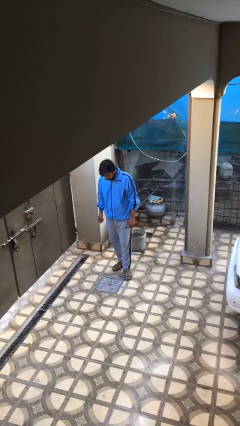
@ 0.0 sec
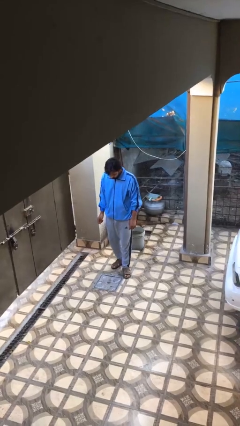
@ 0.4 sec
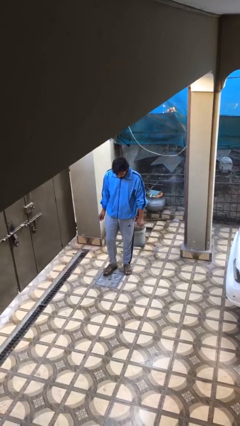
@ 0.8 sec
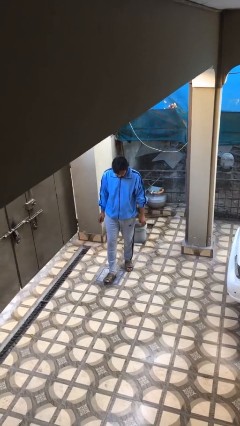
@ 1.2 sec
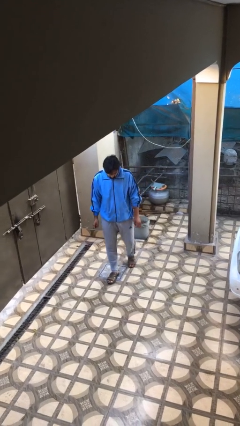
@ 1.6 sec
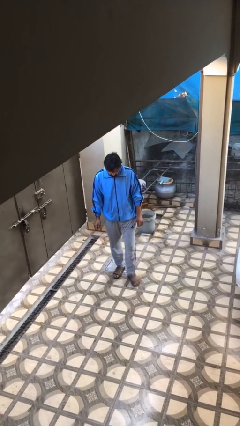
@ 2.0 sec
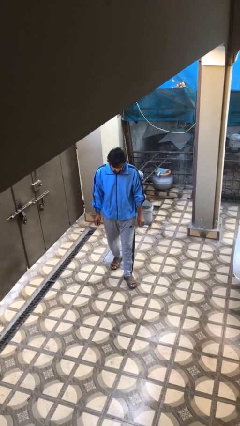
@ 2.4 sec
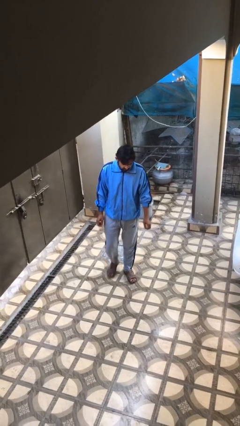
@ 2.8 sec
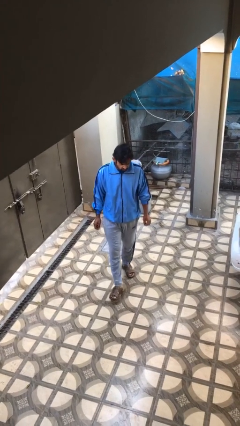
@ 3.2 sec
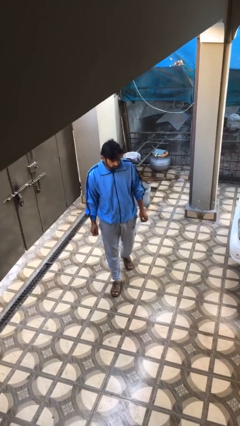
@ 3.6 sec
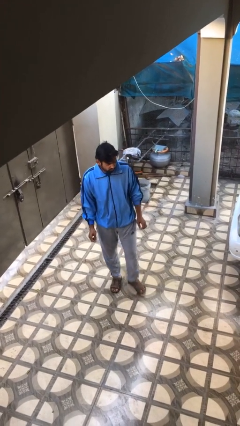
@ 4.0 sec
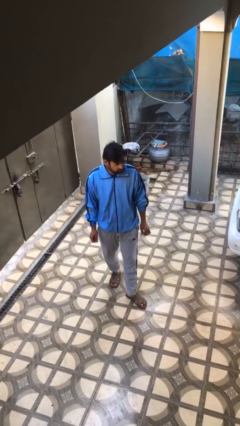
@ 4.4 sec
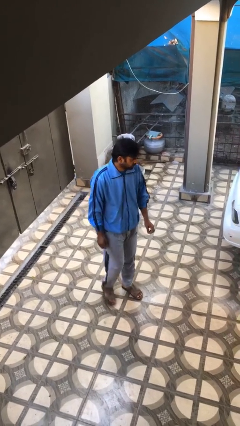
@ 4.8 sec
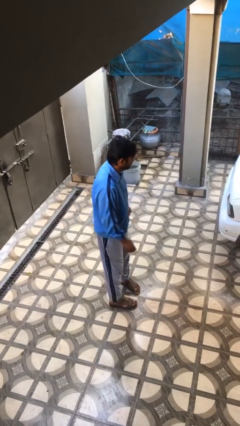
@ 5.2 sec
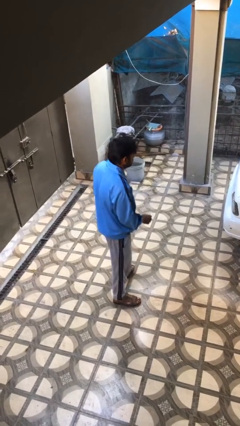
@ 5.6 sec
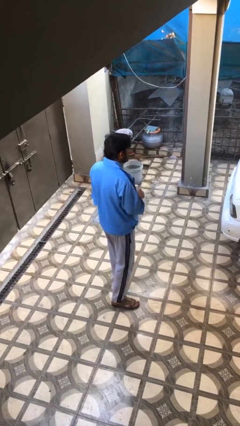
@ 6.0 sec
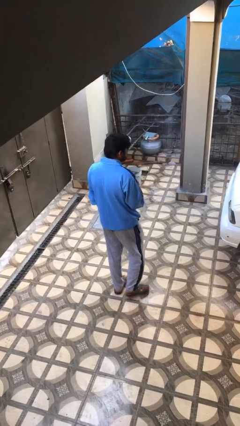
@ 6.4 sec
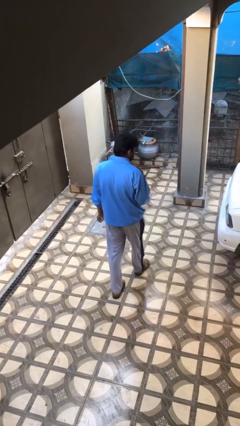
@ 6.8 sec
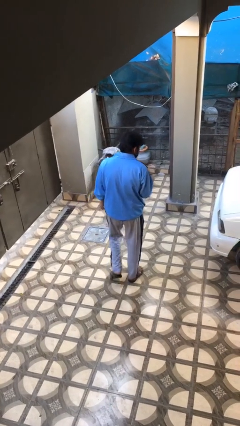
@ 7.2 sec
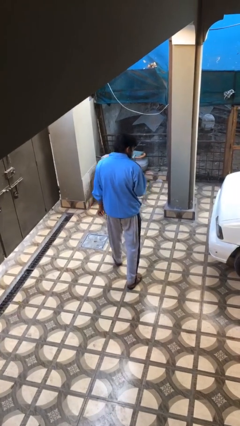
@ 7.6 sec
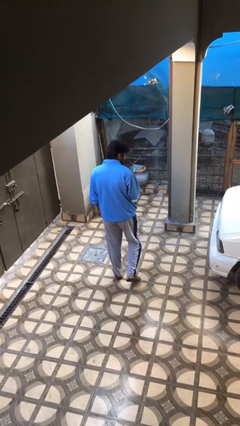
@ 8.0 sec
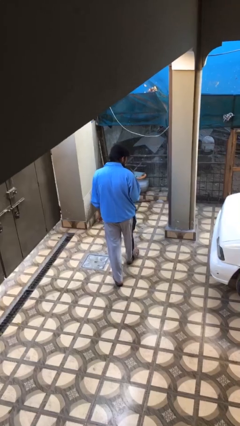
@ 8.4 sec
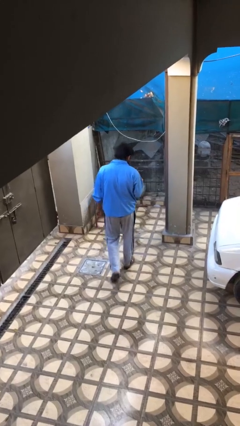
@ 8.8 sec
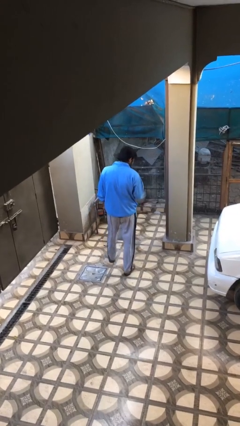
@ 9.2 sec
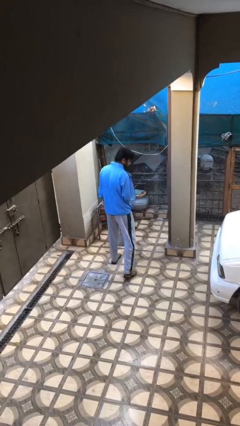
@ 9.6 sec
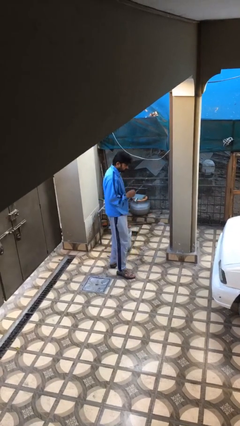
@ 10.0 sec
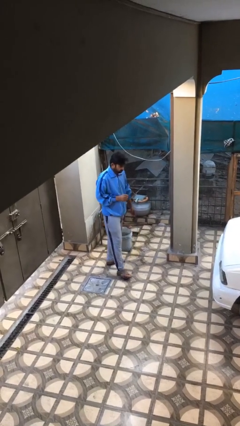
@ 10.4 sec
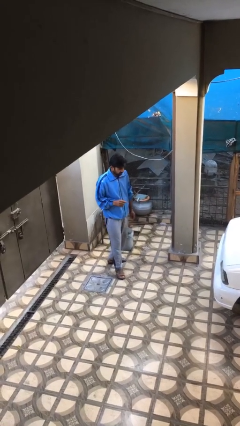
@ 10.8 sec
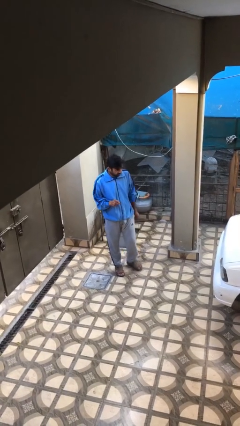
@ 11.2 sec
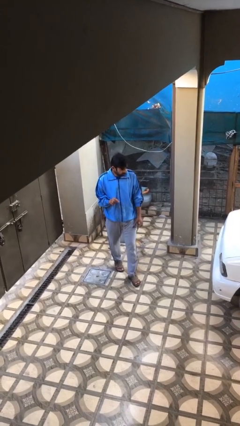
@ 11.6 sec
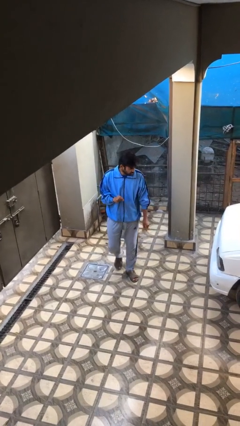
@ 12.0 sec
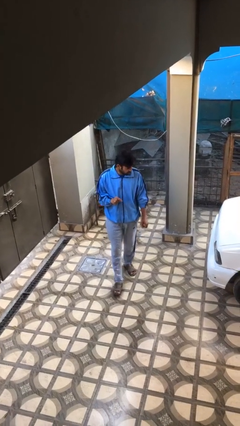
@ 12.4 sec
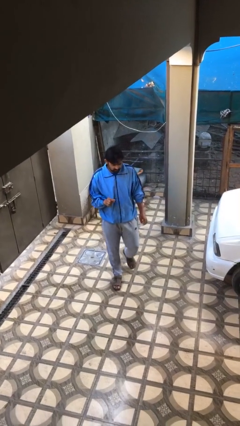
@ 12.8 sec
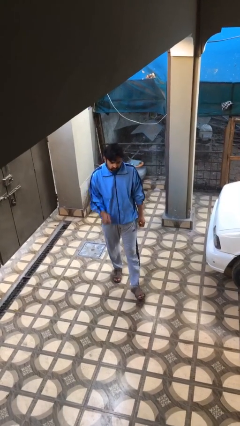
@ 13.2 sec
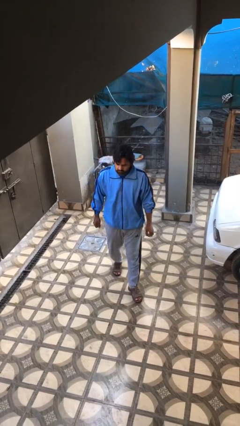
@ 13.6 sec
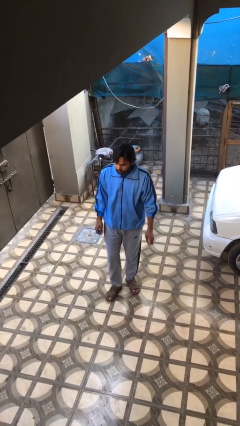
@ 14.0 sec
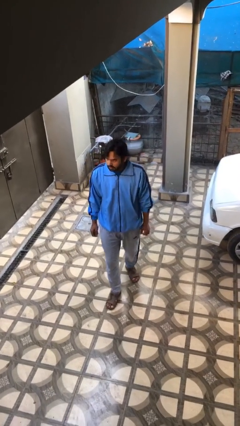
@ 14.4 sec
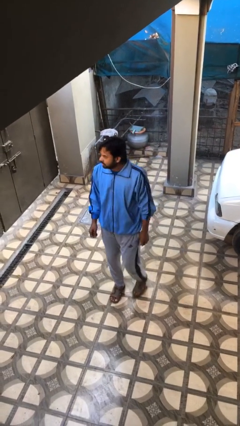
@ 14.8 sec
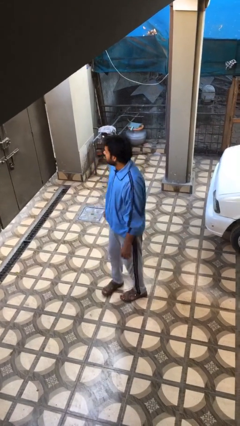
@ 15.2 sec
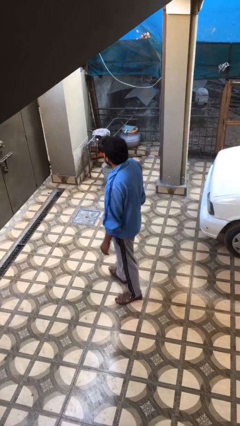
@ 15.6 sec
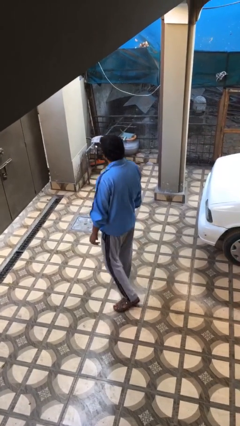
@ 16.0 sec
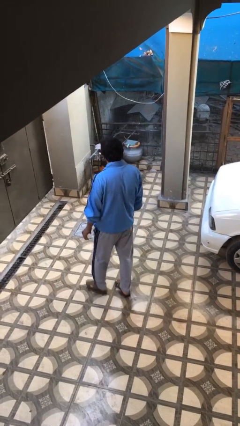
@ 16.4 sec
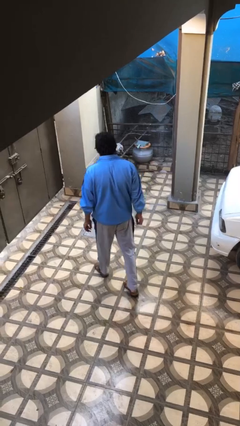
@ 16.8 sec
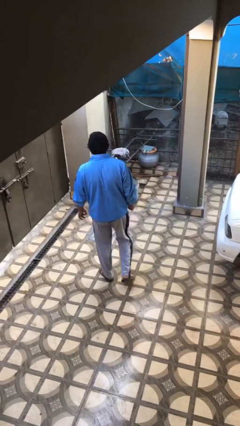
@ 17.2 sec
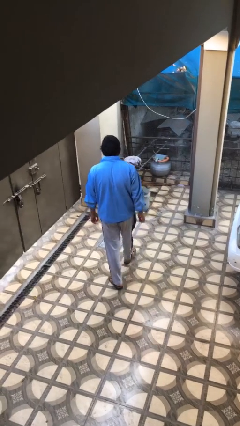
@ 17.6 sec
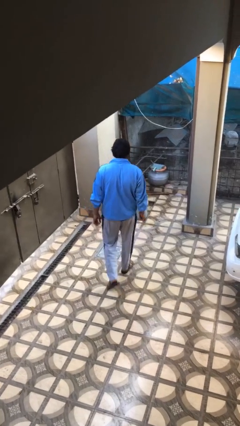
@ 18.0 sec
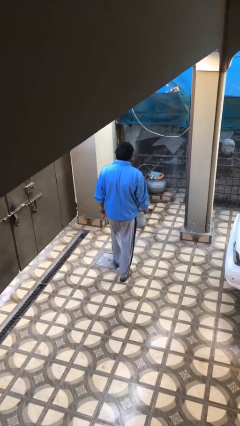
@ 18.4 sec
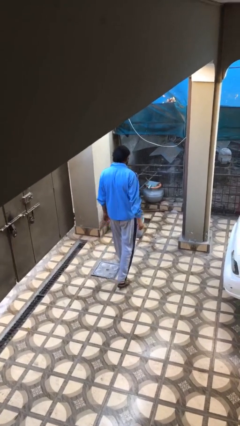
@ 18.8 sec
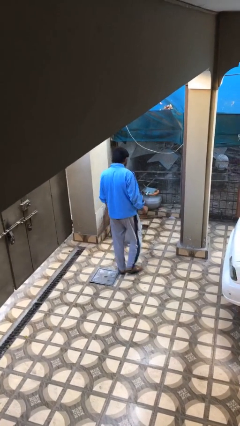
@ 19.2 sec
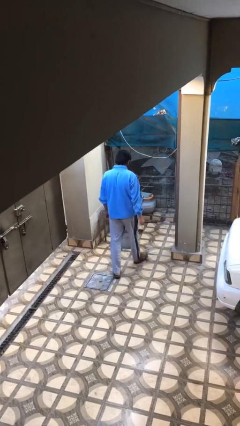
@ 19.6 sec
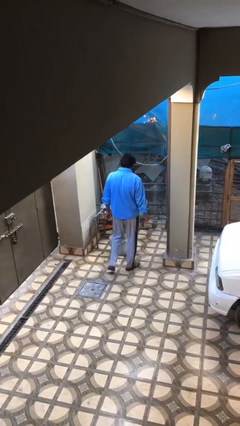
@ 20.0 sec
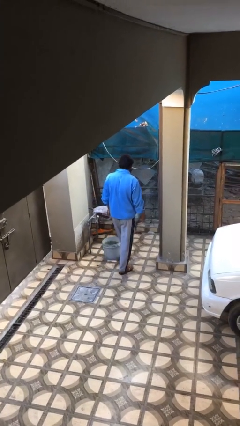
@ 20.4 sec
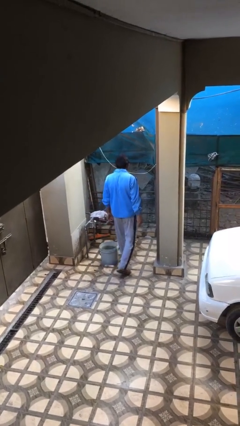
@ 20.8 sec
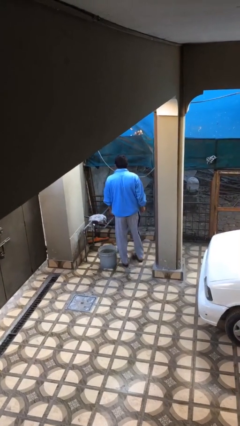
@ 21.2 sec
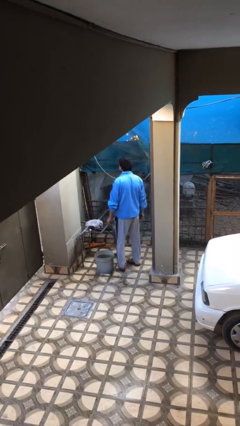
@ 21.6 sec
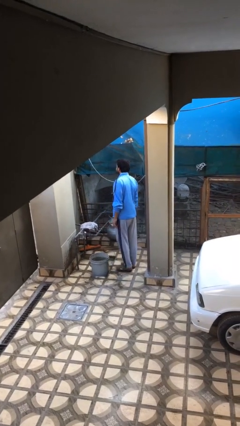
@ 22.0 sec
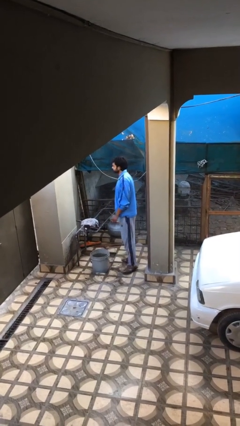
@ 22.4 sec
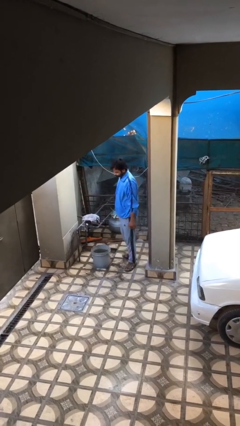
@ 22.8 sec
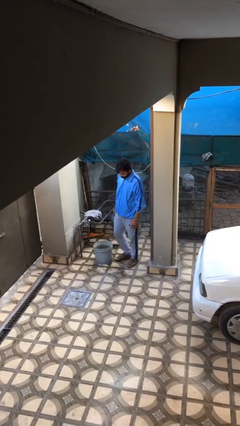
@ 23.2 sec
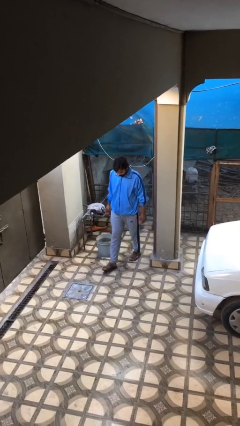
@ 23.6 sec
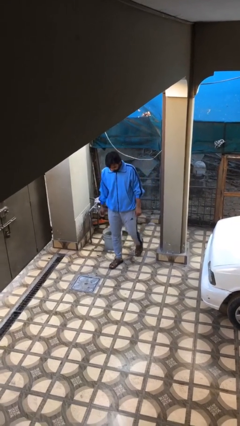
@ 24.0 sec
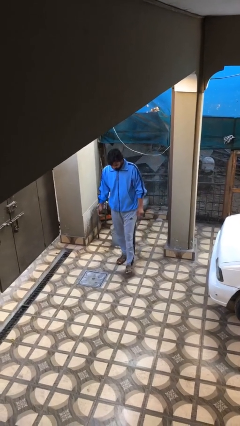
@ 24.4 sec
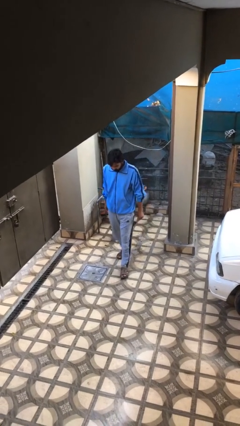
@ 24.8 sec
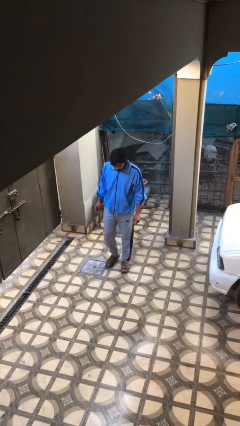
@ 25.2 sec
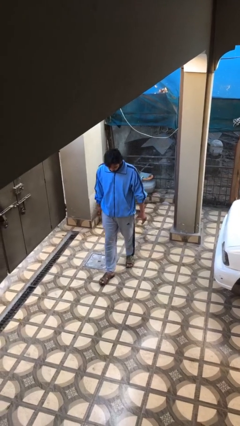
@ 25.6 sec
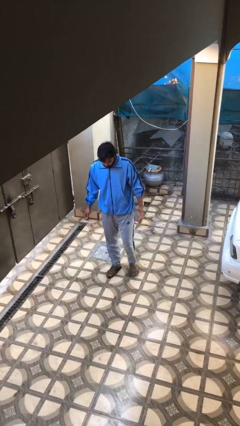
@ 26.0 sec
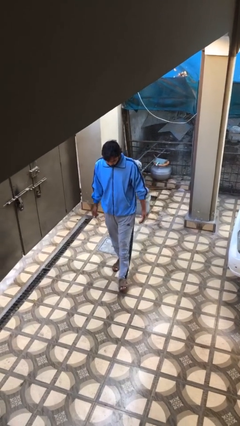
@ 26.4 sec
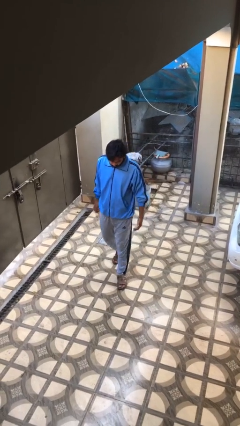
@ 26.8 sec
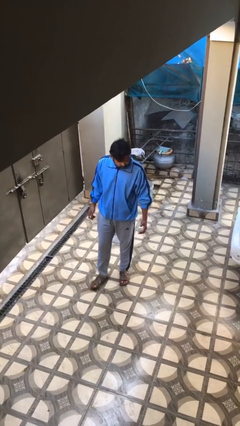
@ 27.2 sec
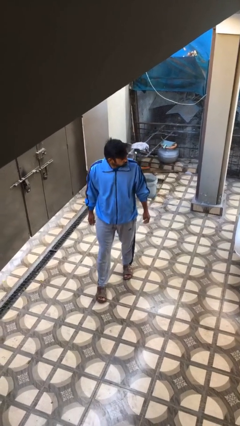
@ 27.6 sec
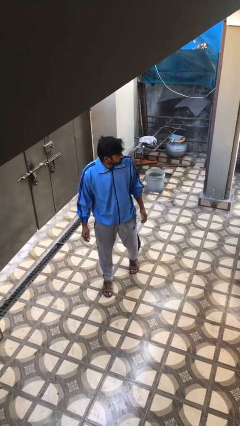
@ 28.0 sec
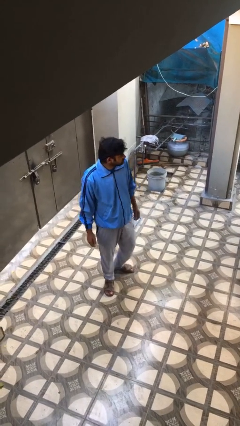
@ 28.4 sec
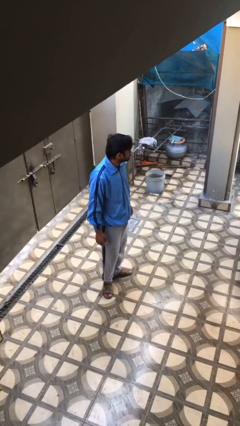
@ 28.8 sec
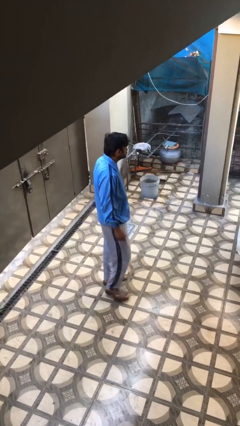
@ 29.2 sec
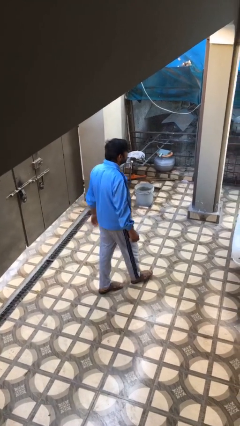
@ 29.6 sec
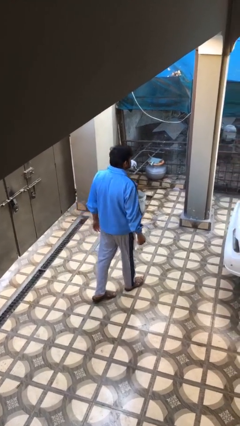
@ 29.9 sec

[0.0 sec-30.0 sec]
person walks

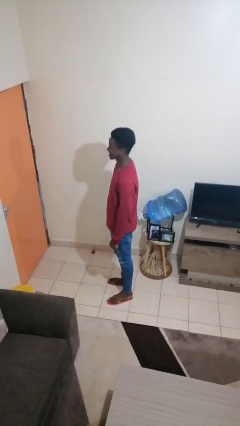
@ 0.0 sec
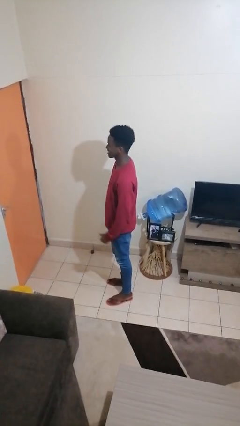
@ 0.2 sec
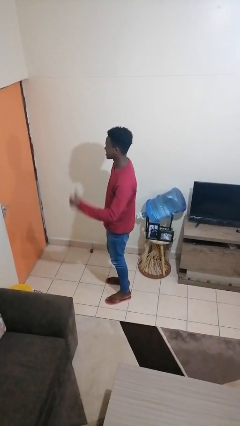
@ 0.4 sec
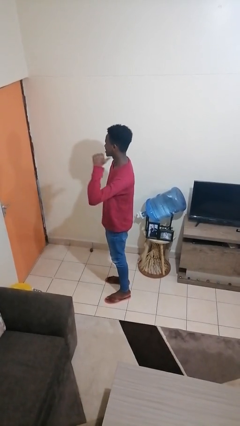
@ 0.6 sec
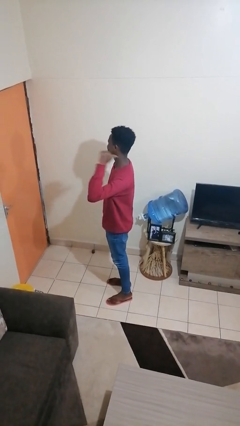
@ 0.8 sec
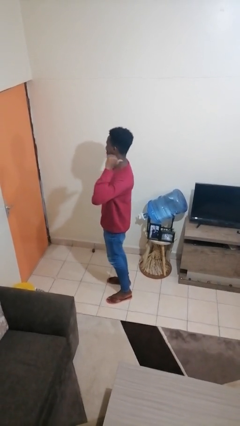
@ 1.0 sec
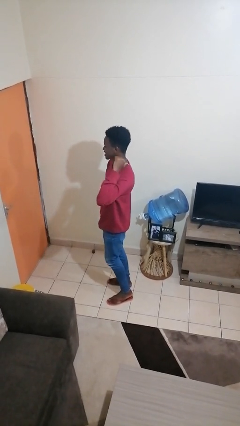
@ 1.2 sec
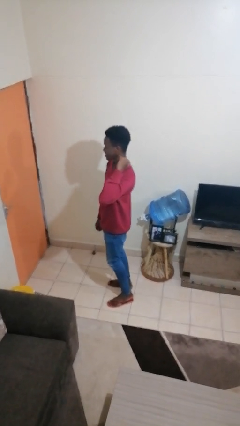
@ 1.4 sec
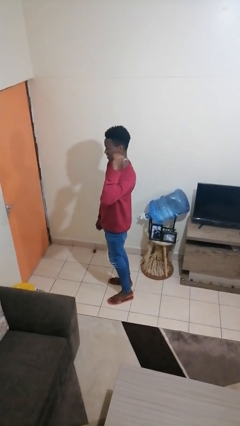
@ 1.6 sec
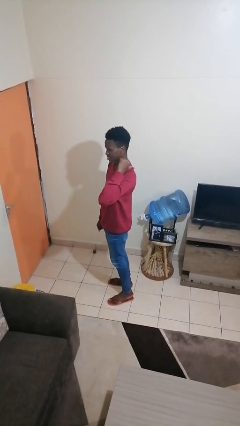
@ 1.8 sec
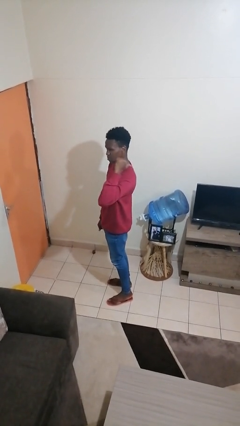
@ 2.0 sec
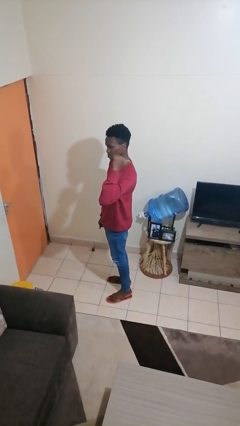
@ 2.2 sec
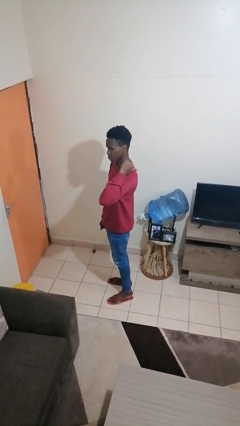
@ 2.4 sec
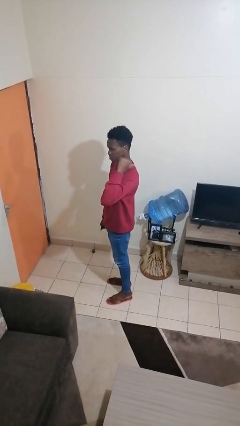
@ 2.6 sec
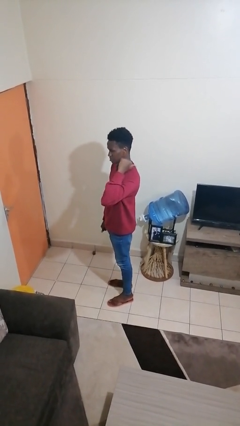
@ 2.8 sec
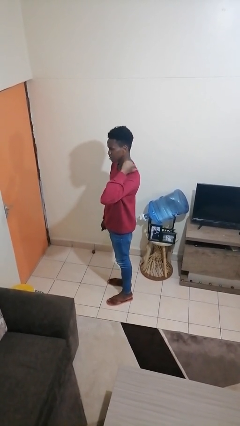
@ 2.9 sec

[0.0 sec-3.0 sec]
person gestures behind me
